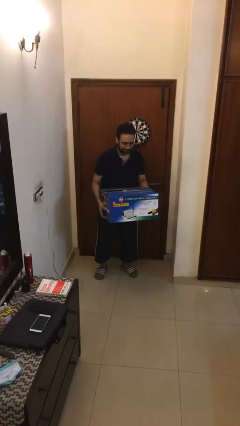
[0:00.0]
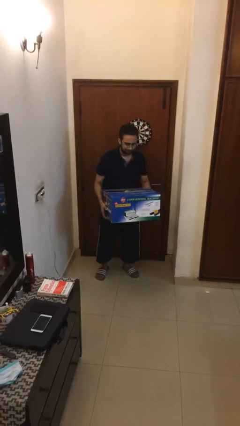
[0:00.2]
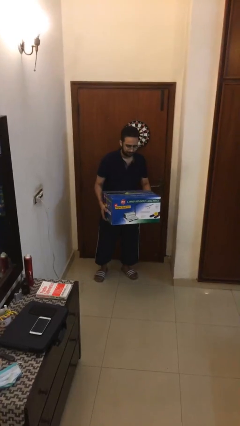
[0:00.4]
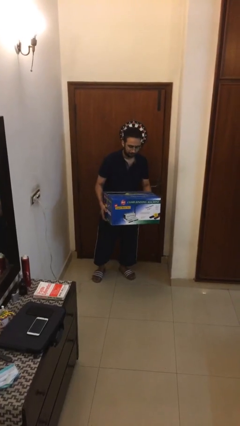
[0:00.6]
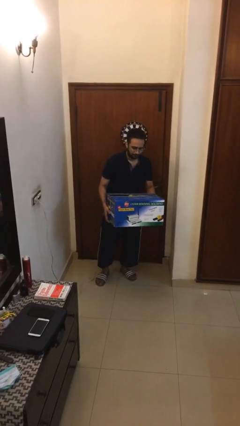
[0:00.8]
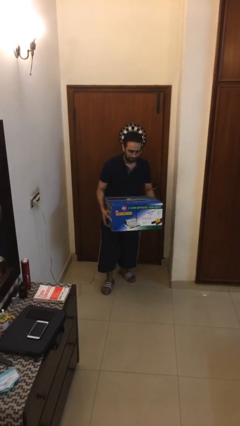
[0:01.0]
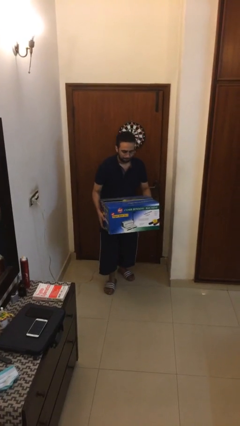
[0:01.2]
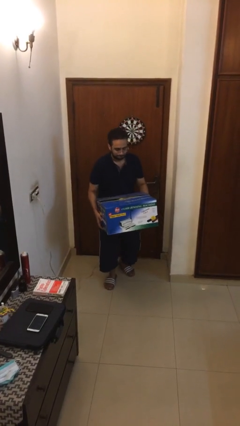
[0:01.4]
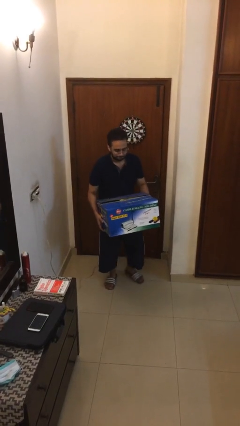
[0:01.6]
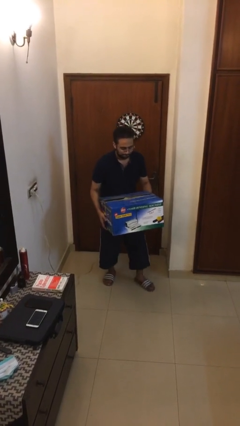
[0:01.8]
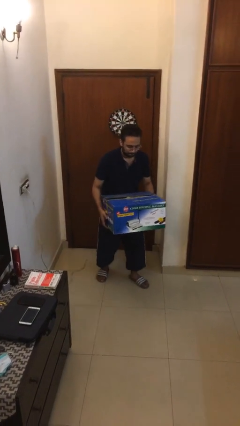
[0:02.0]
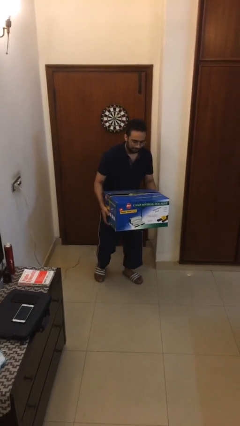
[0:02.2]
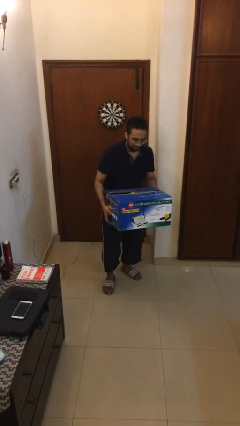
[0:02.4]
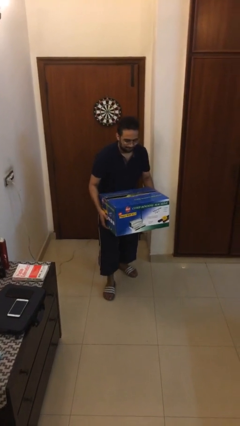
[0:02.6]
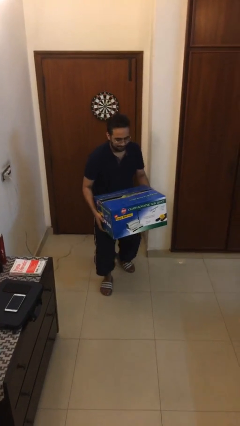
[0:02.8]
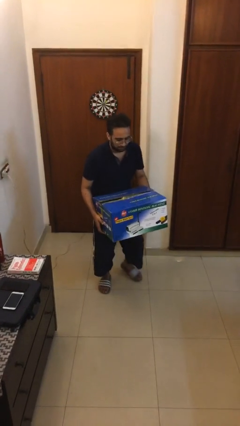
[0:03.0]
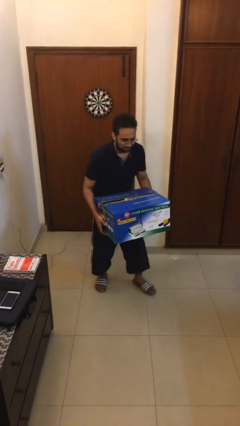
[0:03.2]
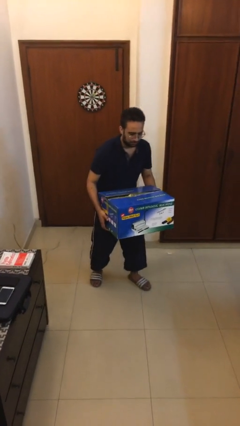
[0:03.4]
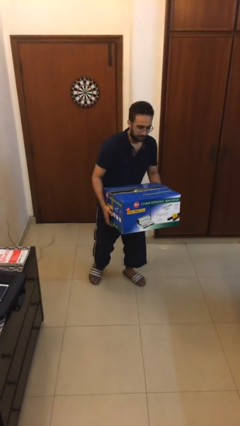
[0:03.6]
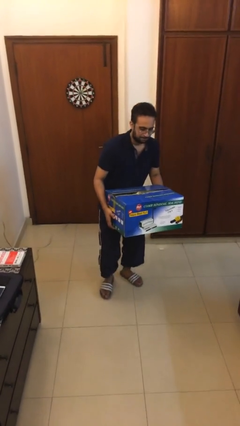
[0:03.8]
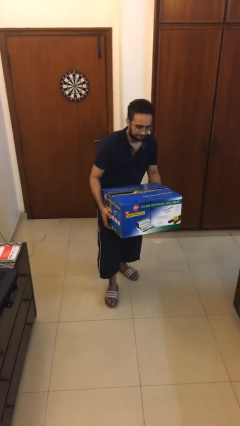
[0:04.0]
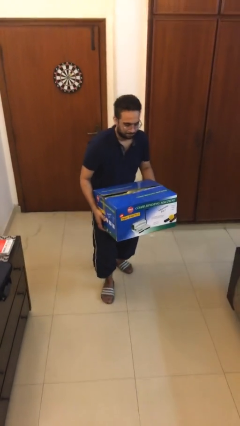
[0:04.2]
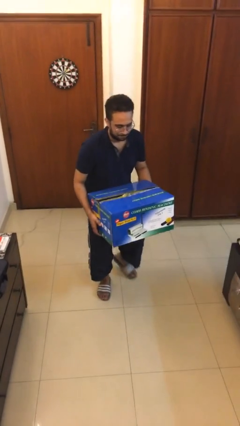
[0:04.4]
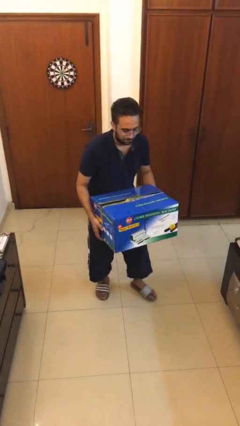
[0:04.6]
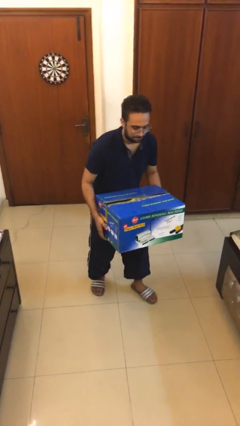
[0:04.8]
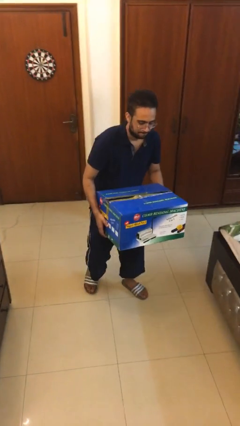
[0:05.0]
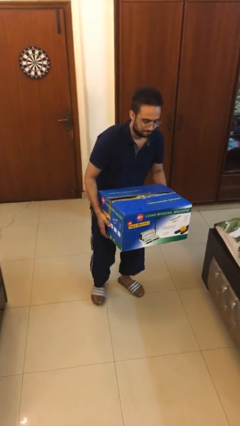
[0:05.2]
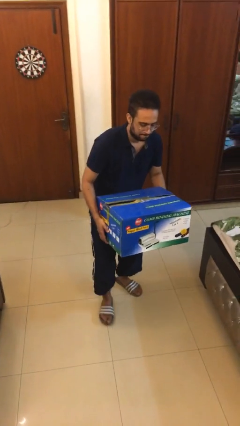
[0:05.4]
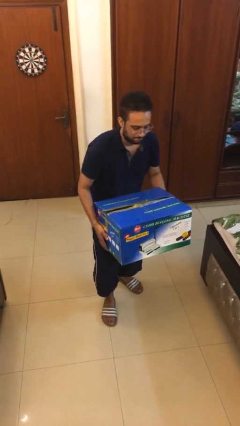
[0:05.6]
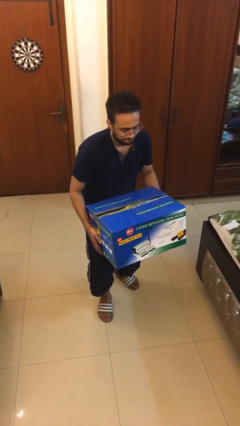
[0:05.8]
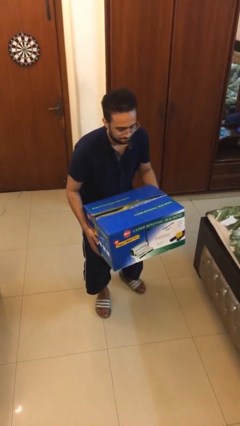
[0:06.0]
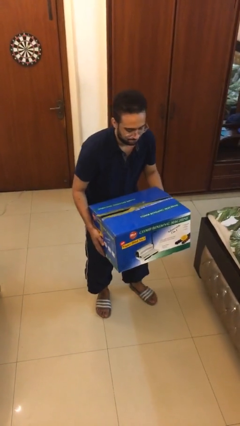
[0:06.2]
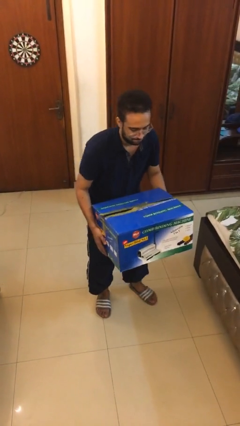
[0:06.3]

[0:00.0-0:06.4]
person carries heavy object

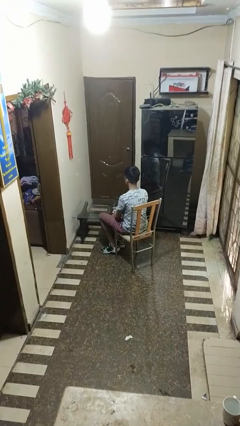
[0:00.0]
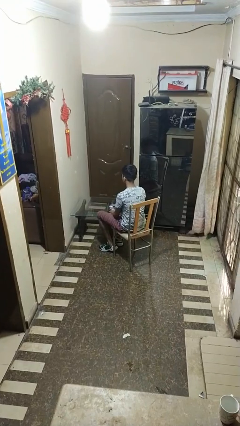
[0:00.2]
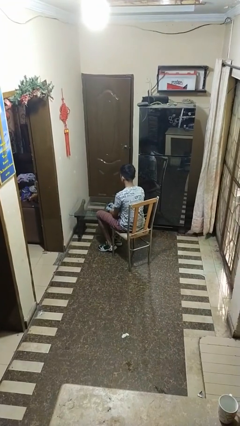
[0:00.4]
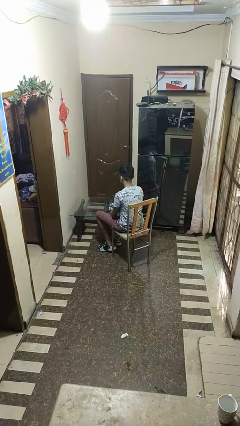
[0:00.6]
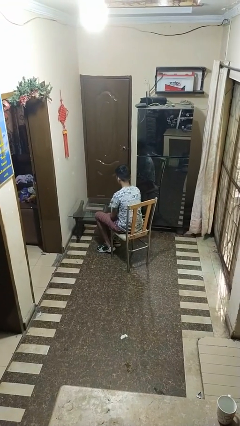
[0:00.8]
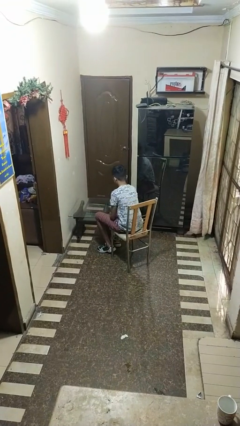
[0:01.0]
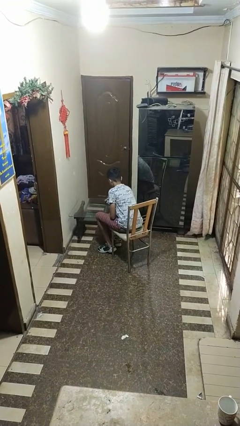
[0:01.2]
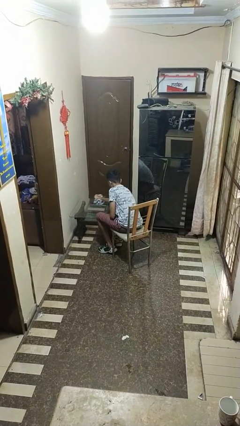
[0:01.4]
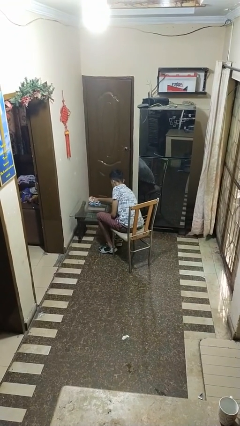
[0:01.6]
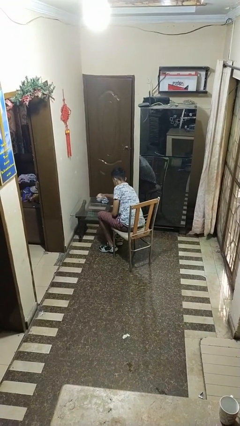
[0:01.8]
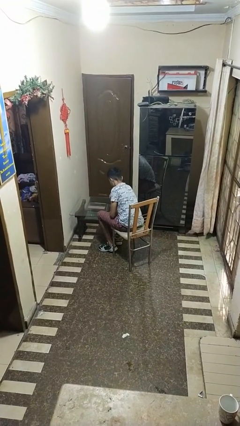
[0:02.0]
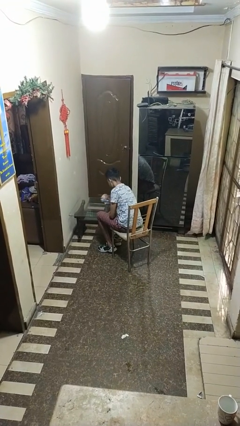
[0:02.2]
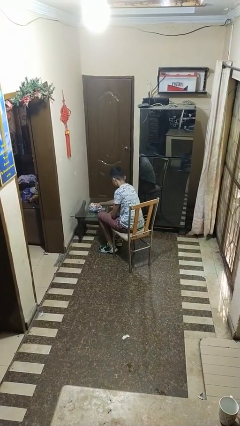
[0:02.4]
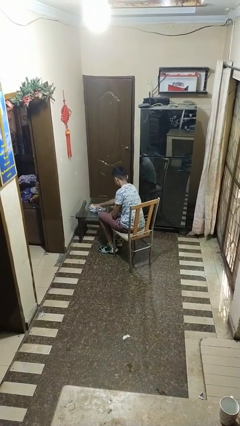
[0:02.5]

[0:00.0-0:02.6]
person cleans table with rag

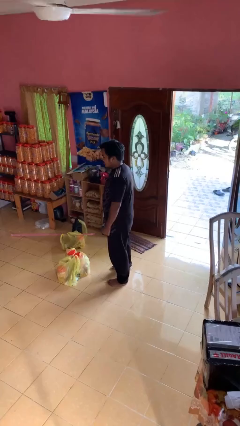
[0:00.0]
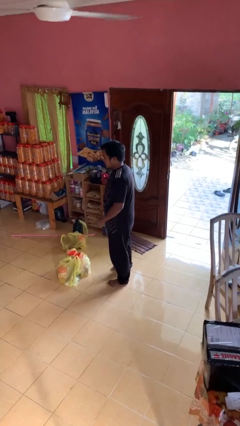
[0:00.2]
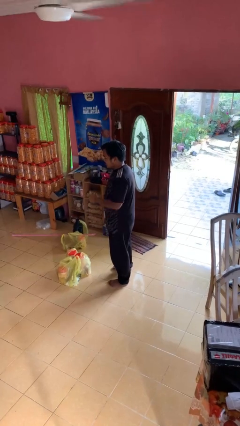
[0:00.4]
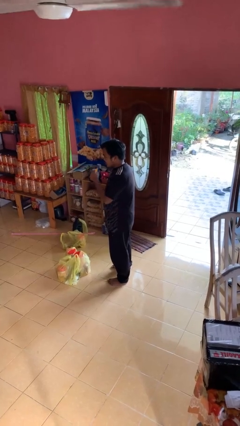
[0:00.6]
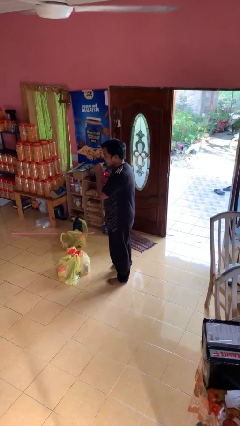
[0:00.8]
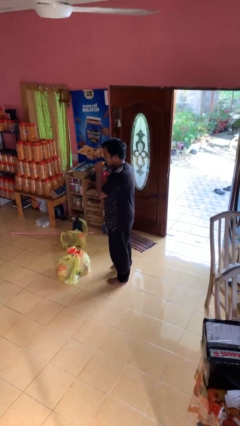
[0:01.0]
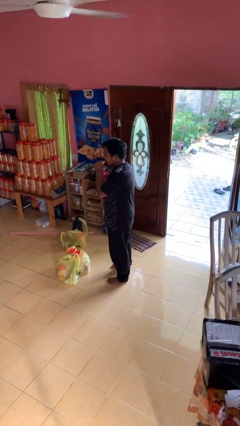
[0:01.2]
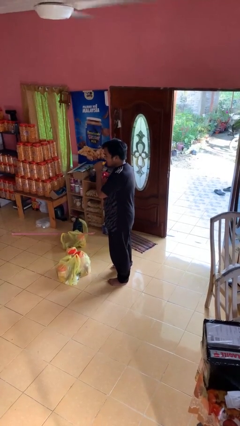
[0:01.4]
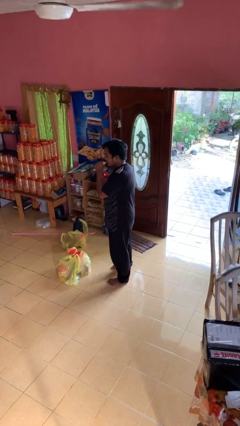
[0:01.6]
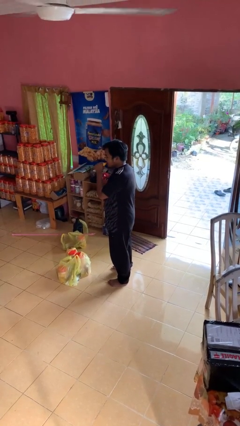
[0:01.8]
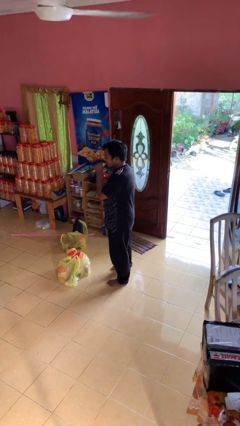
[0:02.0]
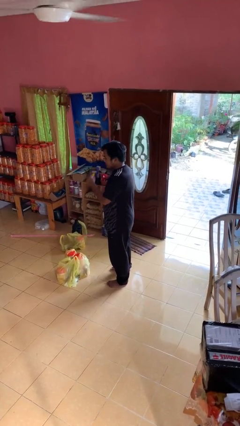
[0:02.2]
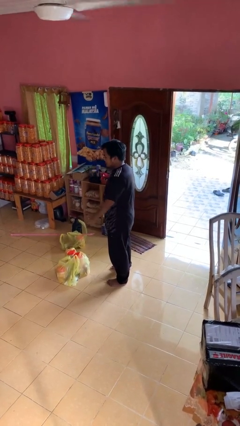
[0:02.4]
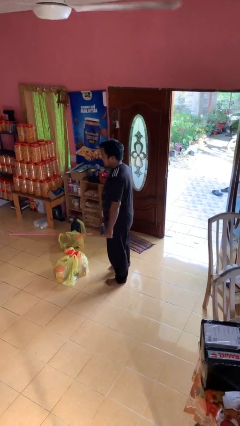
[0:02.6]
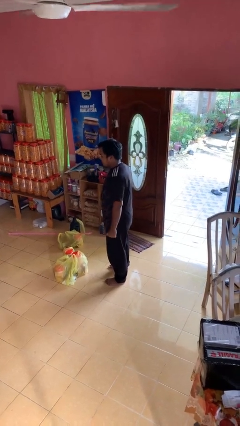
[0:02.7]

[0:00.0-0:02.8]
person eats banana

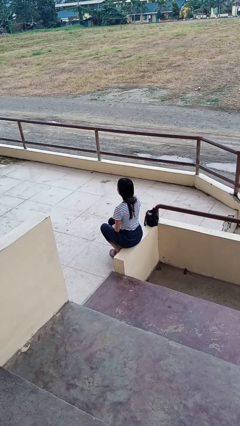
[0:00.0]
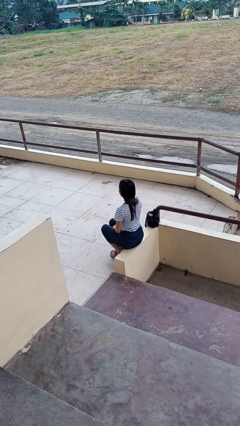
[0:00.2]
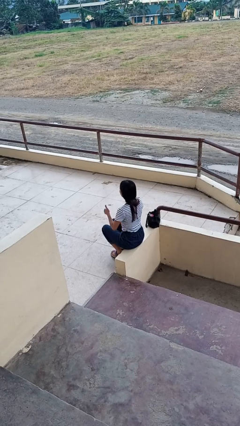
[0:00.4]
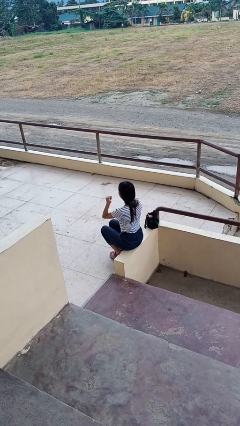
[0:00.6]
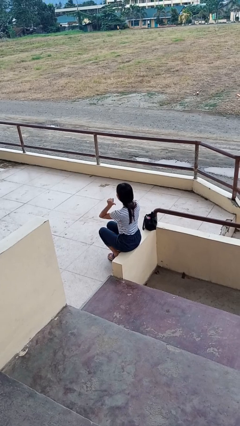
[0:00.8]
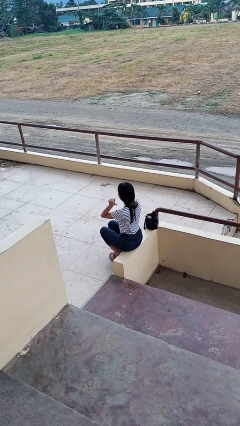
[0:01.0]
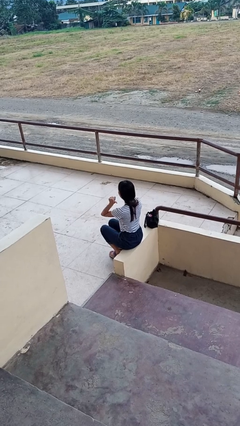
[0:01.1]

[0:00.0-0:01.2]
person gestures behind me

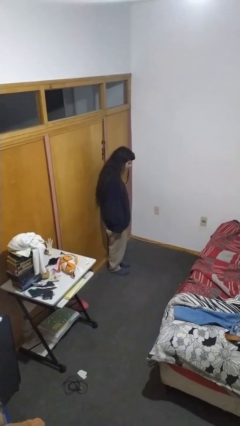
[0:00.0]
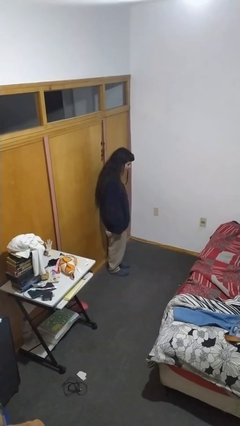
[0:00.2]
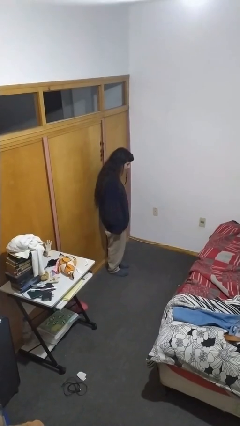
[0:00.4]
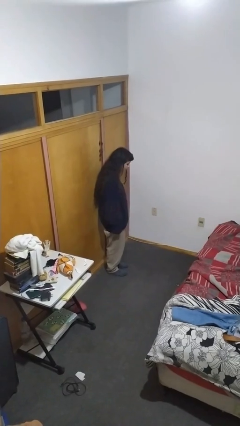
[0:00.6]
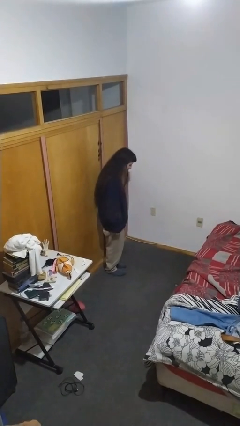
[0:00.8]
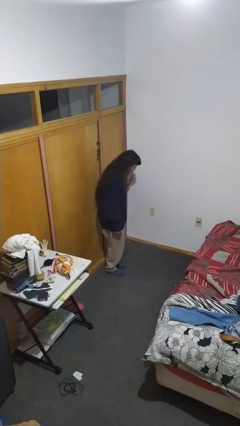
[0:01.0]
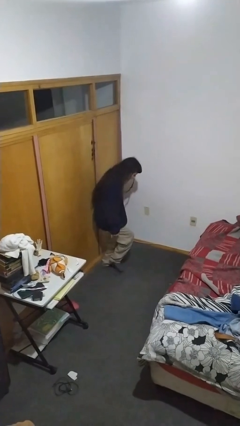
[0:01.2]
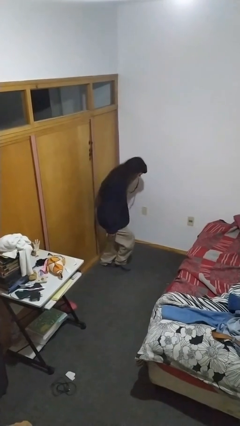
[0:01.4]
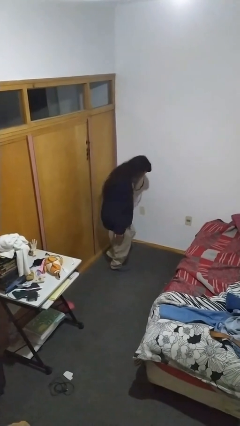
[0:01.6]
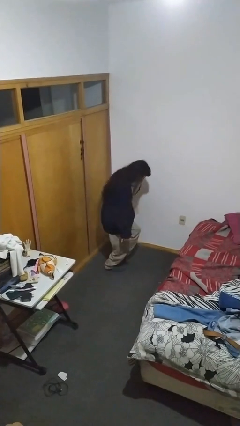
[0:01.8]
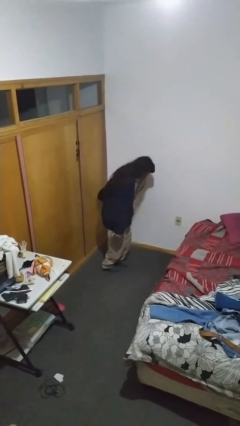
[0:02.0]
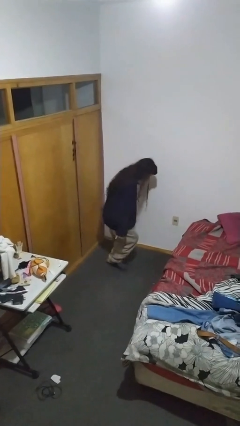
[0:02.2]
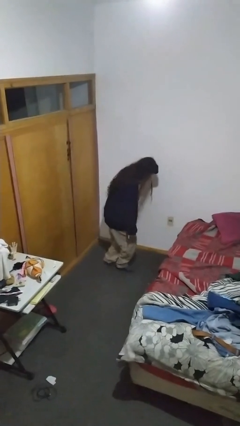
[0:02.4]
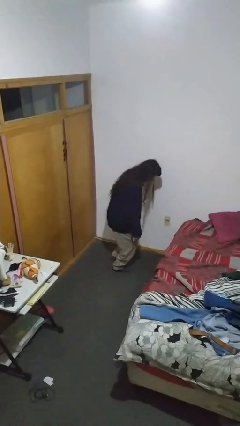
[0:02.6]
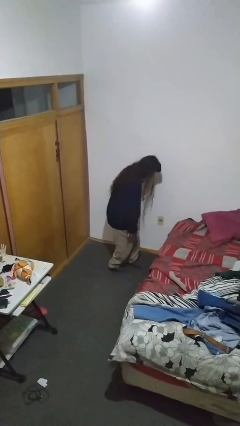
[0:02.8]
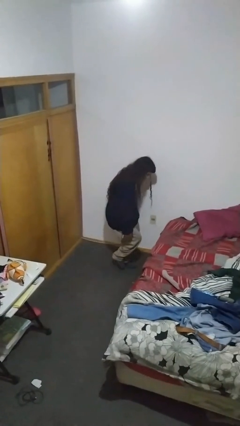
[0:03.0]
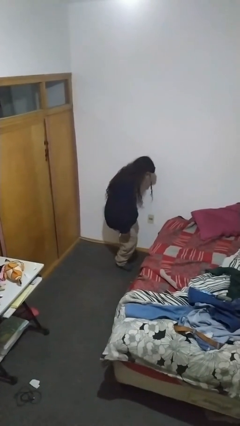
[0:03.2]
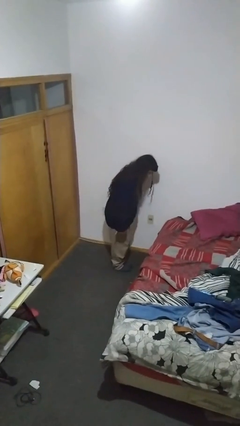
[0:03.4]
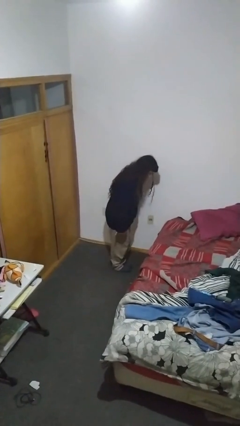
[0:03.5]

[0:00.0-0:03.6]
person walks tiptoe

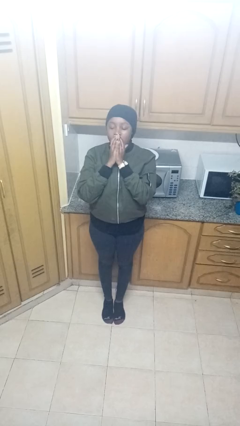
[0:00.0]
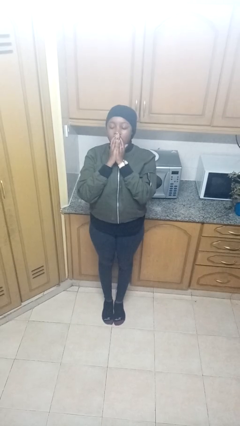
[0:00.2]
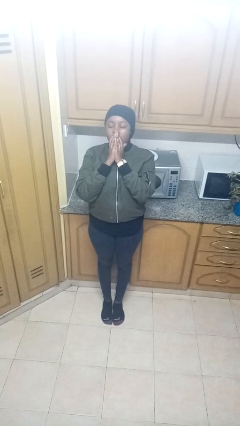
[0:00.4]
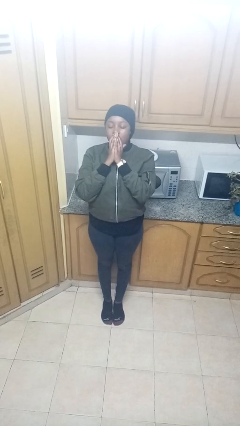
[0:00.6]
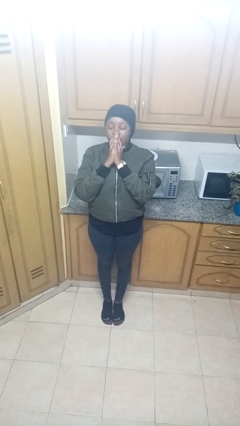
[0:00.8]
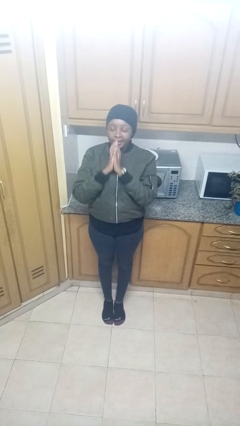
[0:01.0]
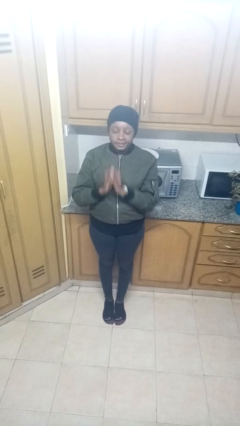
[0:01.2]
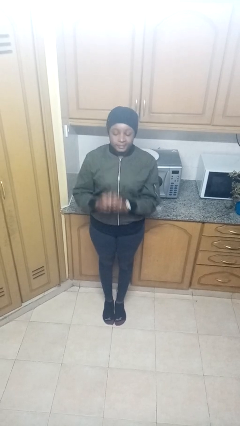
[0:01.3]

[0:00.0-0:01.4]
person yawns
